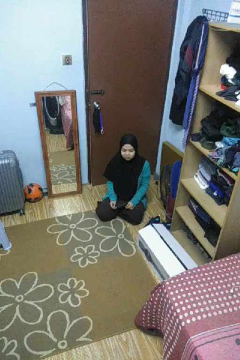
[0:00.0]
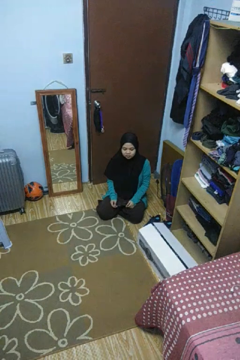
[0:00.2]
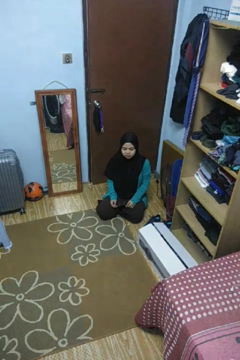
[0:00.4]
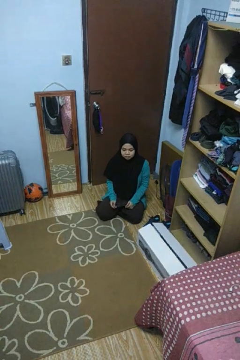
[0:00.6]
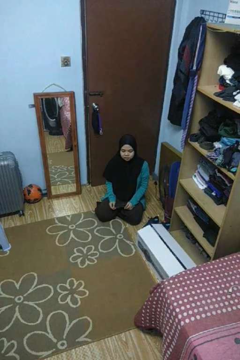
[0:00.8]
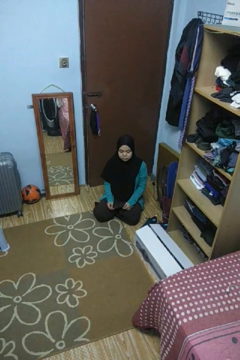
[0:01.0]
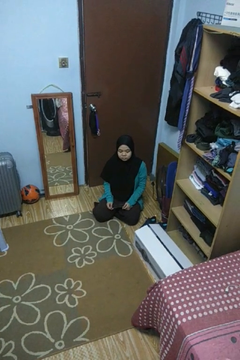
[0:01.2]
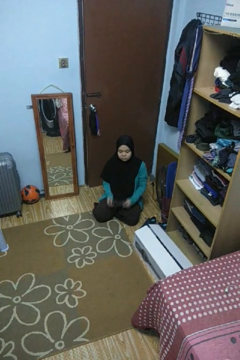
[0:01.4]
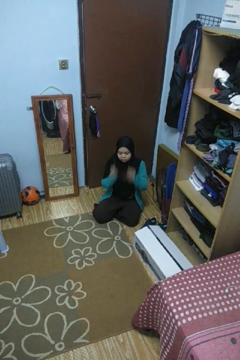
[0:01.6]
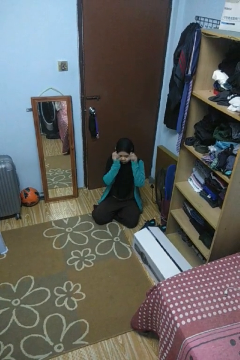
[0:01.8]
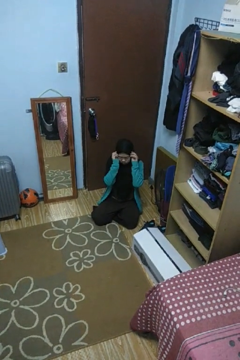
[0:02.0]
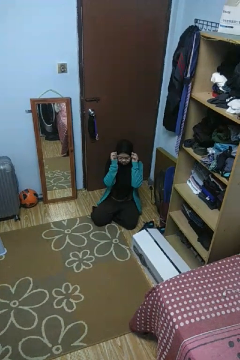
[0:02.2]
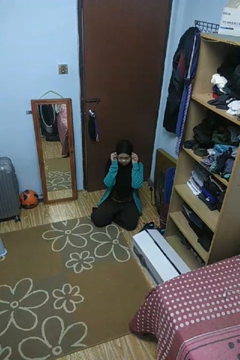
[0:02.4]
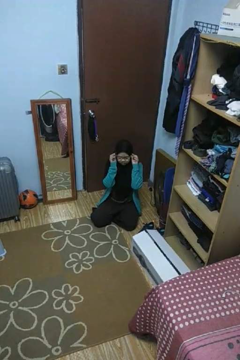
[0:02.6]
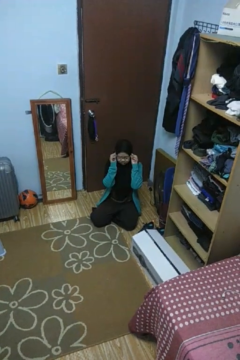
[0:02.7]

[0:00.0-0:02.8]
person puts on glasses

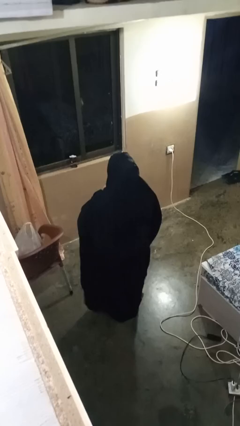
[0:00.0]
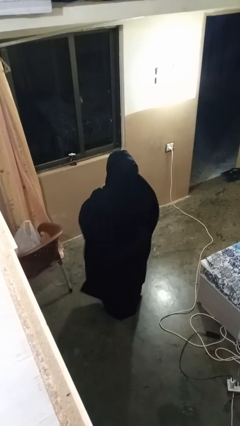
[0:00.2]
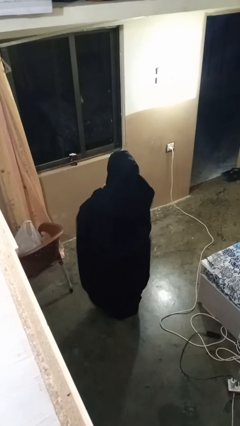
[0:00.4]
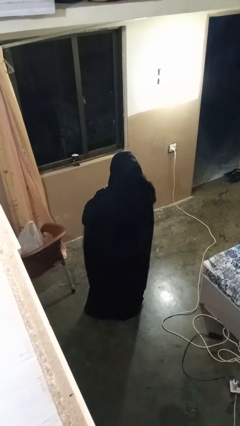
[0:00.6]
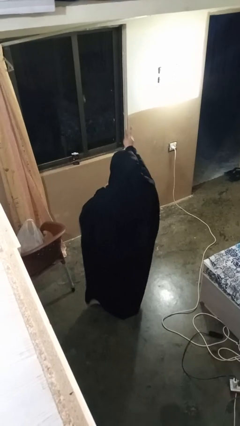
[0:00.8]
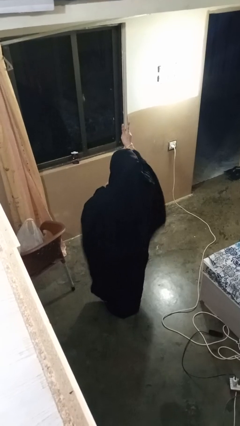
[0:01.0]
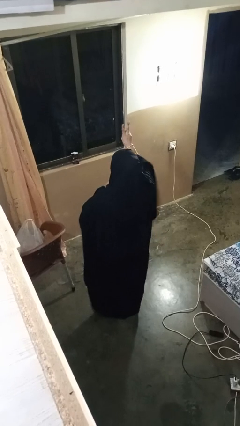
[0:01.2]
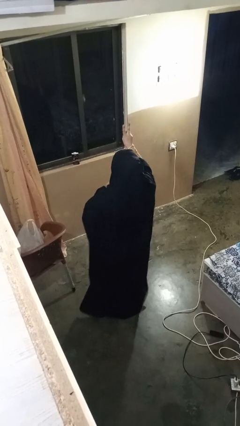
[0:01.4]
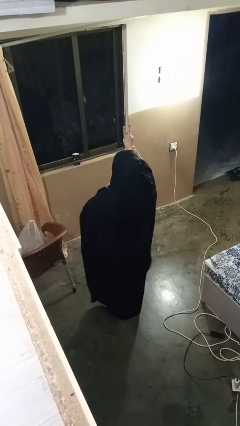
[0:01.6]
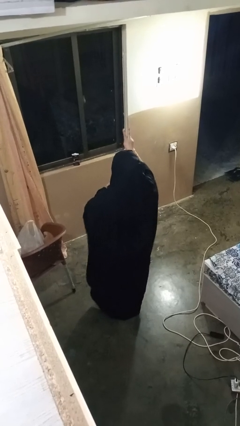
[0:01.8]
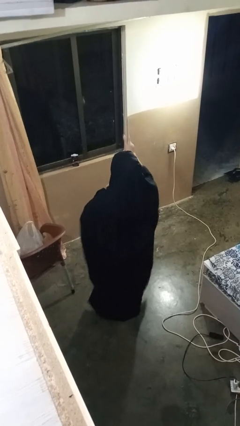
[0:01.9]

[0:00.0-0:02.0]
person gestures peace

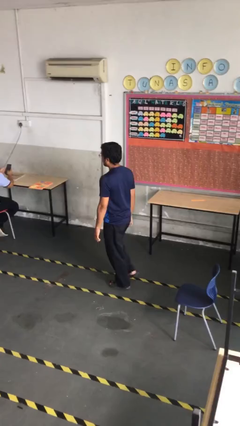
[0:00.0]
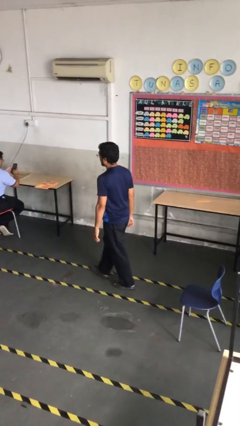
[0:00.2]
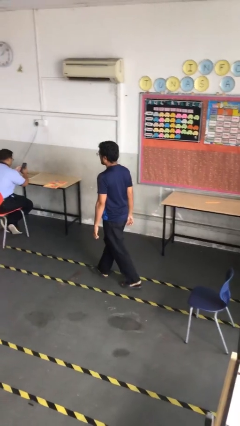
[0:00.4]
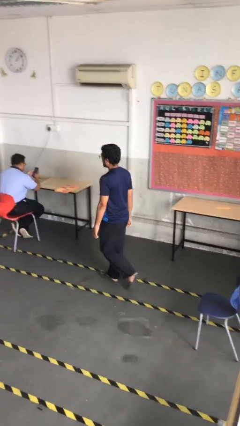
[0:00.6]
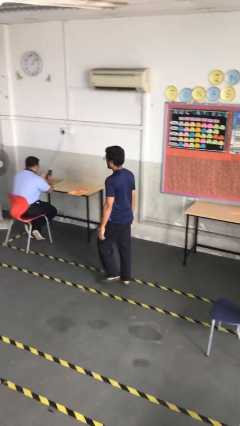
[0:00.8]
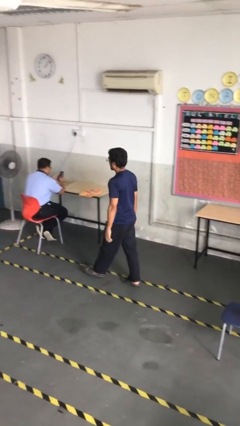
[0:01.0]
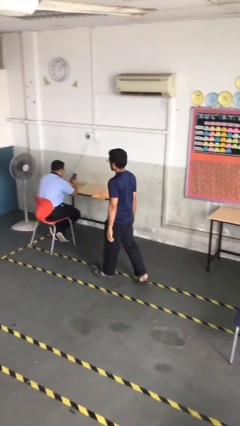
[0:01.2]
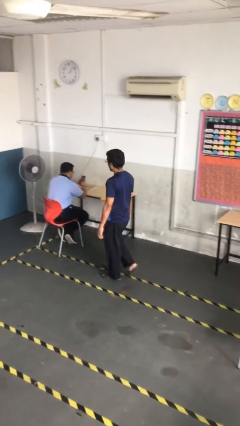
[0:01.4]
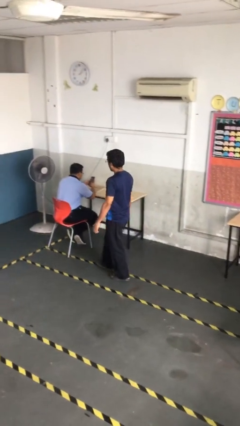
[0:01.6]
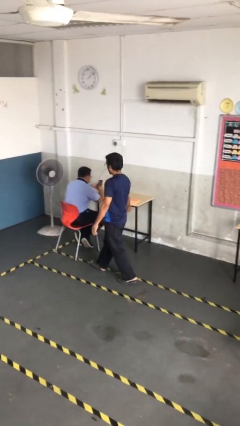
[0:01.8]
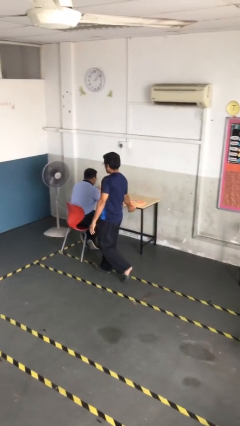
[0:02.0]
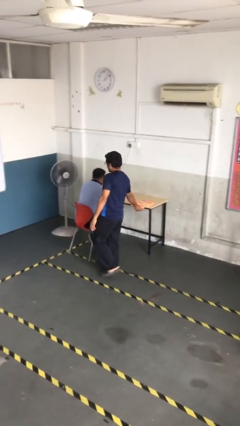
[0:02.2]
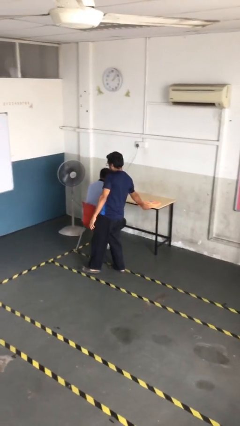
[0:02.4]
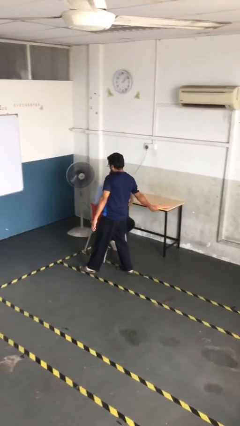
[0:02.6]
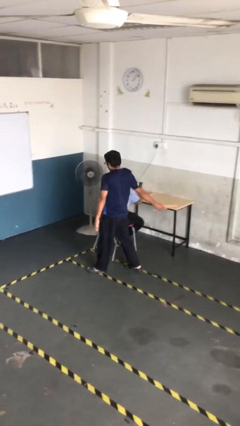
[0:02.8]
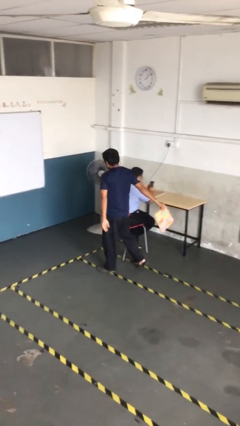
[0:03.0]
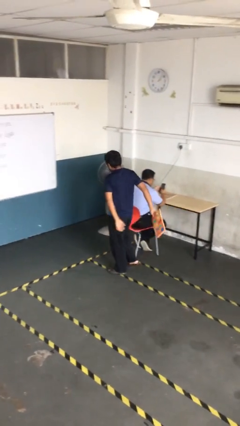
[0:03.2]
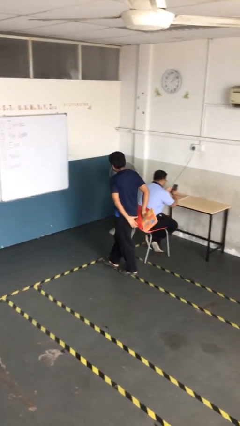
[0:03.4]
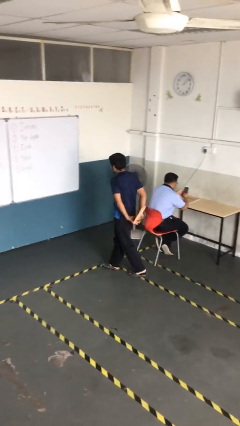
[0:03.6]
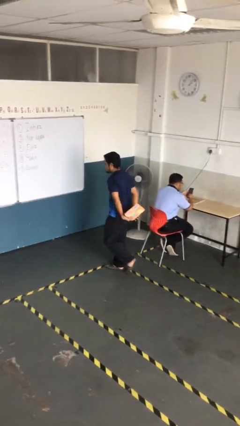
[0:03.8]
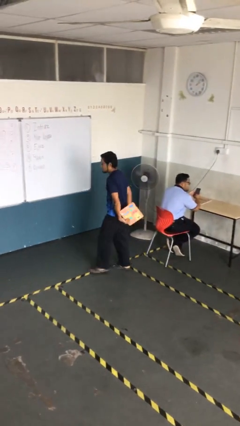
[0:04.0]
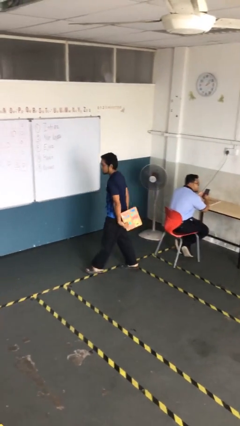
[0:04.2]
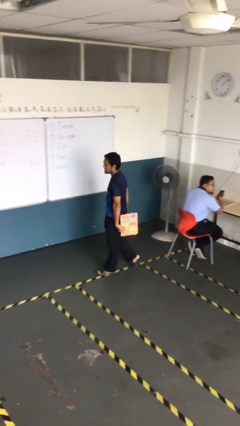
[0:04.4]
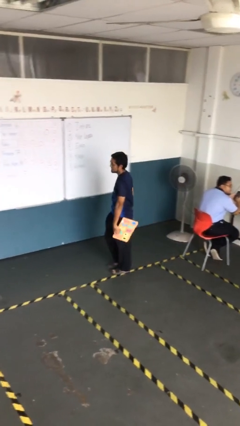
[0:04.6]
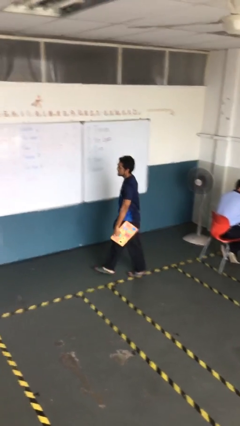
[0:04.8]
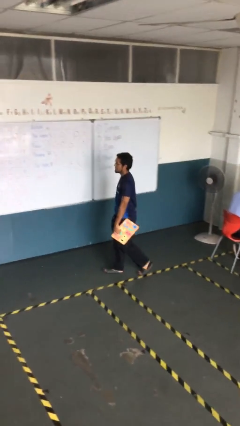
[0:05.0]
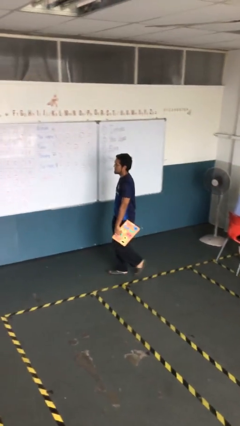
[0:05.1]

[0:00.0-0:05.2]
person steals object from person

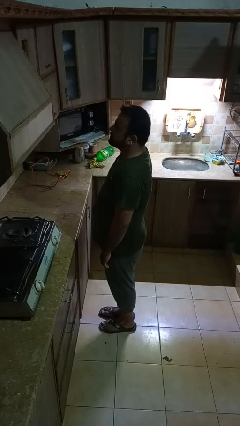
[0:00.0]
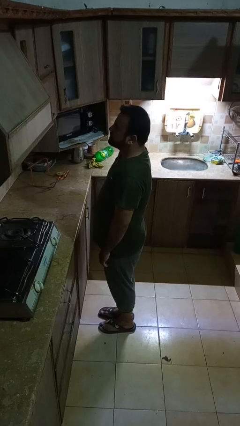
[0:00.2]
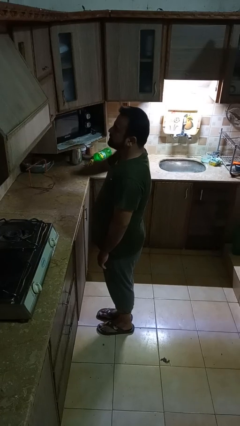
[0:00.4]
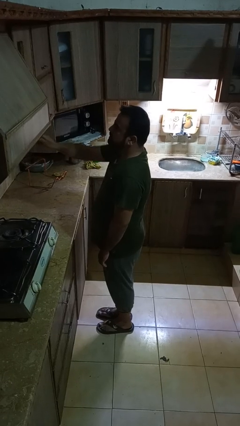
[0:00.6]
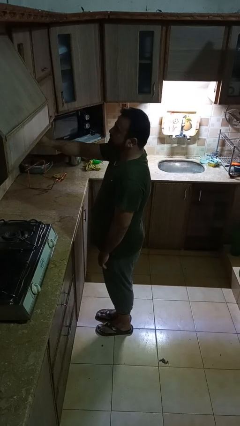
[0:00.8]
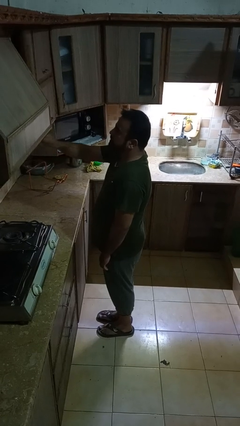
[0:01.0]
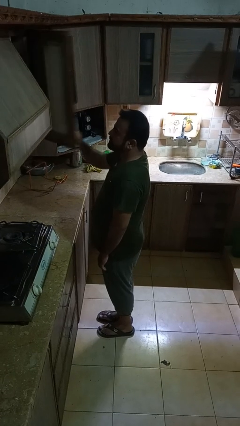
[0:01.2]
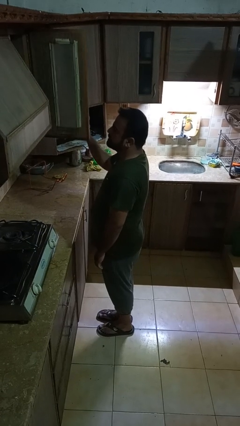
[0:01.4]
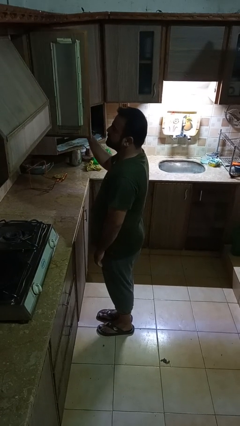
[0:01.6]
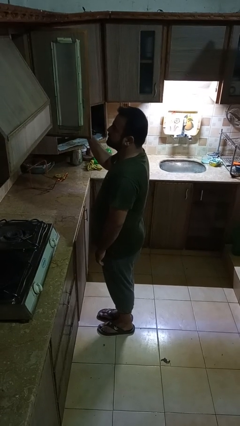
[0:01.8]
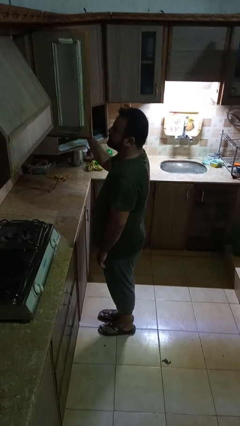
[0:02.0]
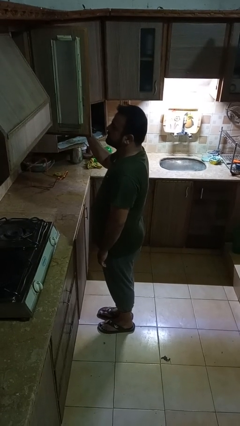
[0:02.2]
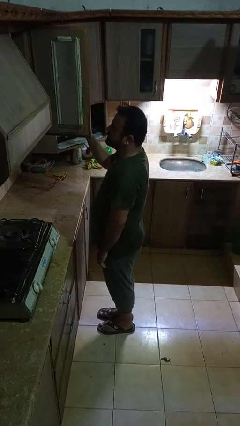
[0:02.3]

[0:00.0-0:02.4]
person opens cabinet

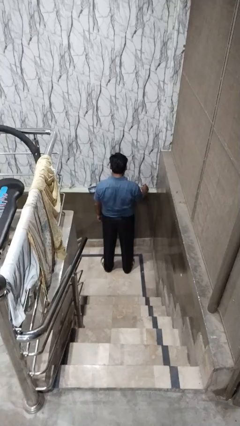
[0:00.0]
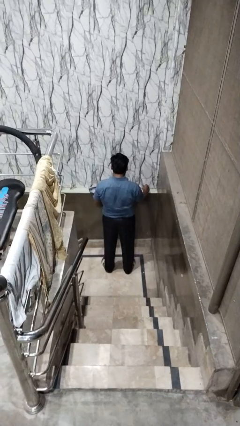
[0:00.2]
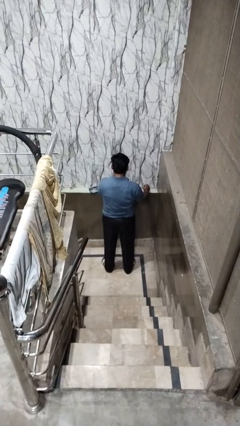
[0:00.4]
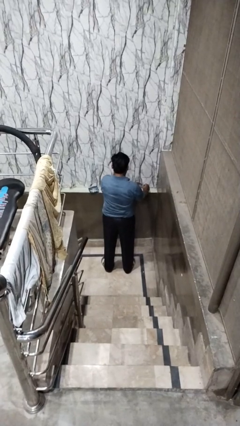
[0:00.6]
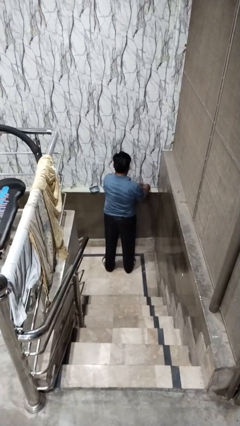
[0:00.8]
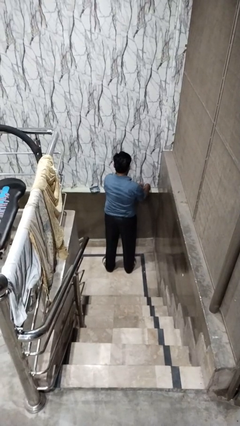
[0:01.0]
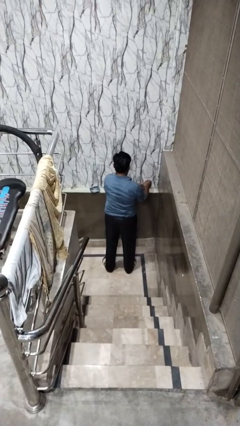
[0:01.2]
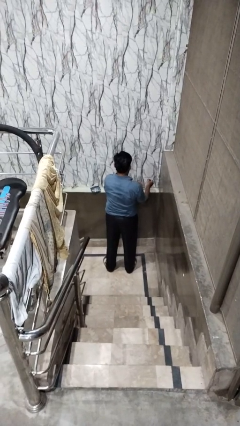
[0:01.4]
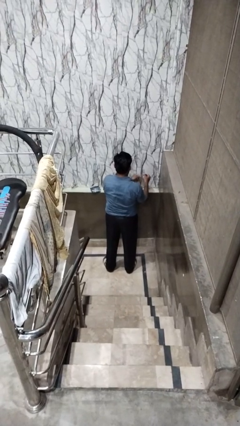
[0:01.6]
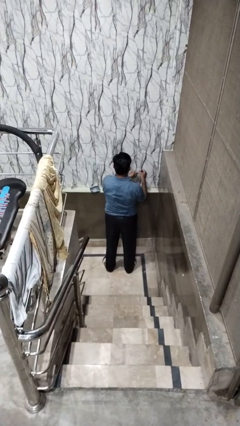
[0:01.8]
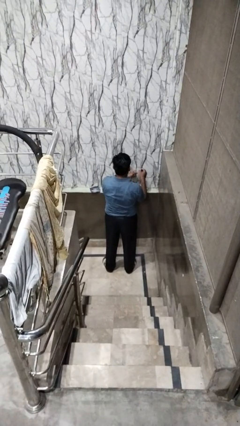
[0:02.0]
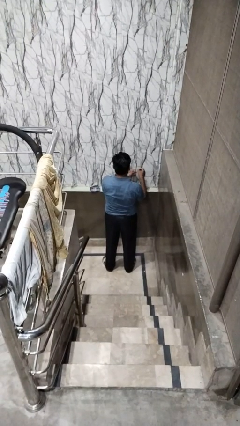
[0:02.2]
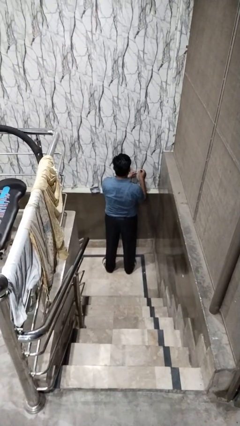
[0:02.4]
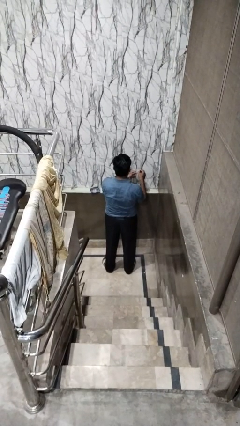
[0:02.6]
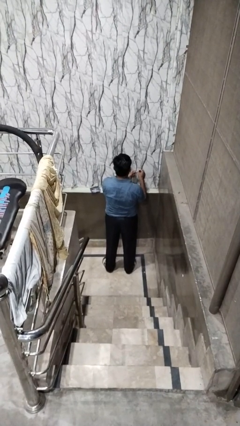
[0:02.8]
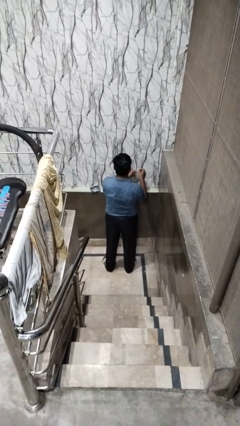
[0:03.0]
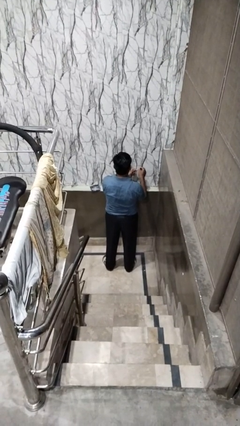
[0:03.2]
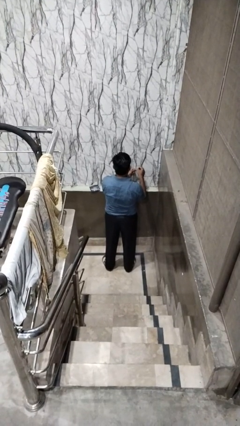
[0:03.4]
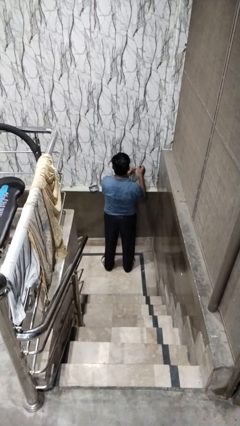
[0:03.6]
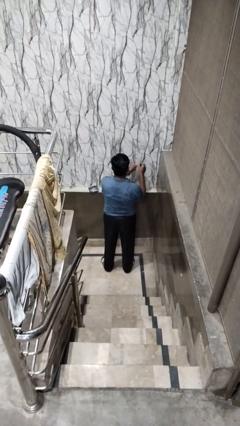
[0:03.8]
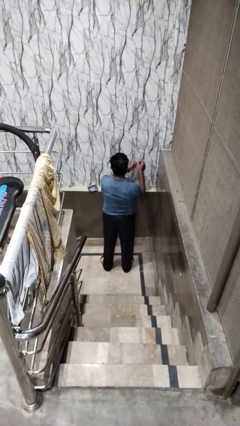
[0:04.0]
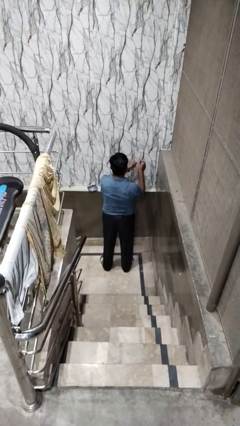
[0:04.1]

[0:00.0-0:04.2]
person paints fingernails

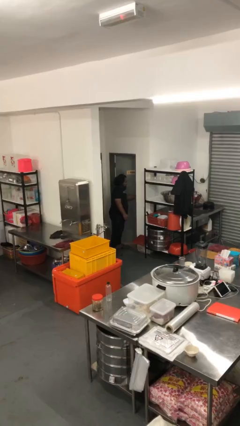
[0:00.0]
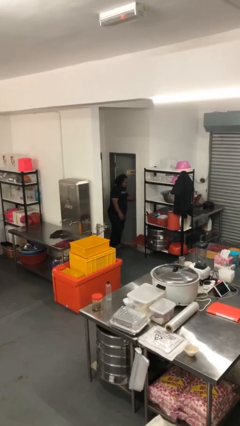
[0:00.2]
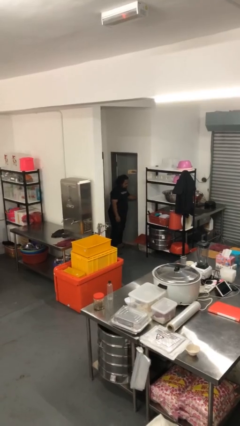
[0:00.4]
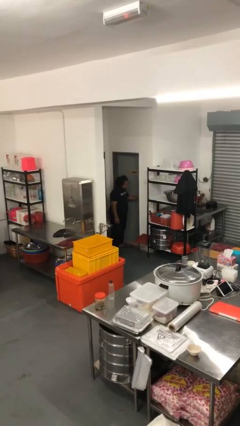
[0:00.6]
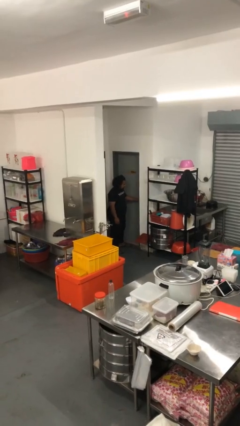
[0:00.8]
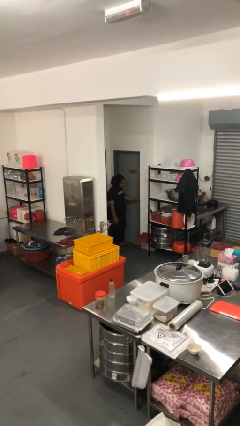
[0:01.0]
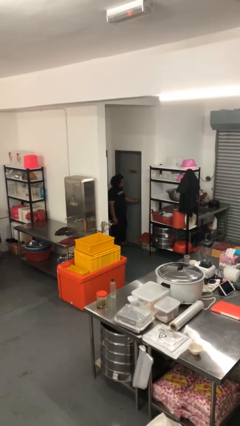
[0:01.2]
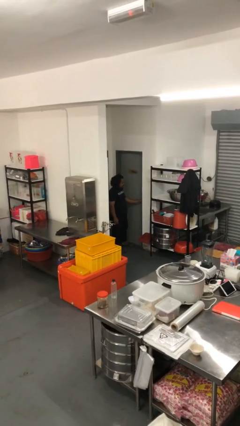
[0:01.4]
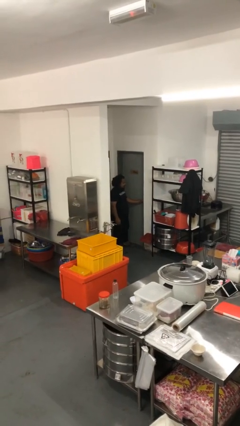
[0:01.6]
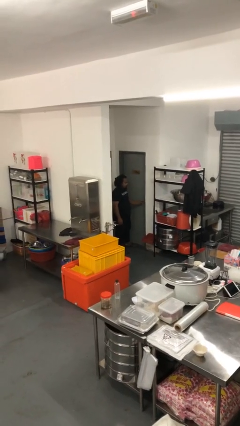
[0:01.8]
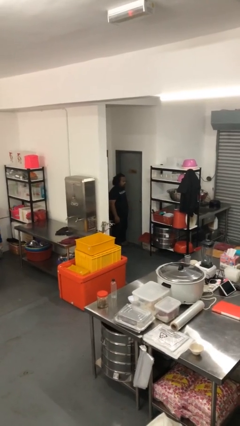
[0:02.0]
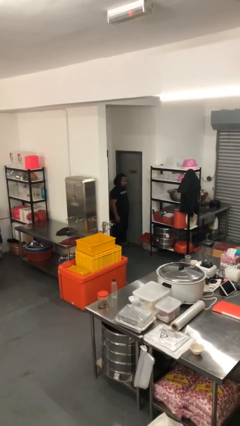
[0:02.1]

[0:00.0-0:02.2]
person closes facility door
